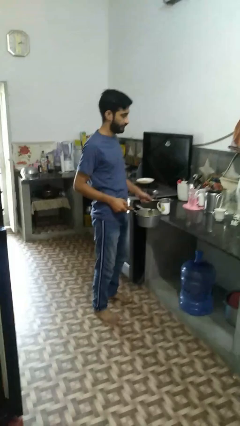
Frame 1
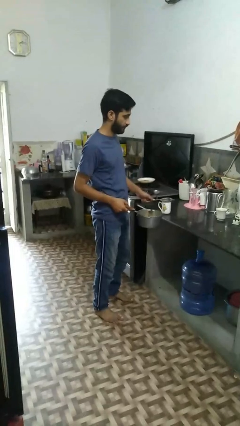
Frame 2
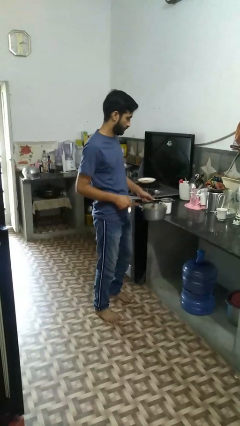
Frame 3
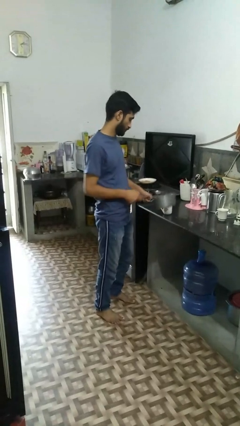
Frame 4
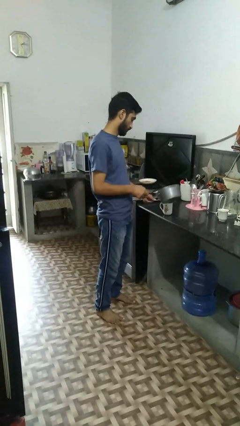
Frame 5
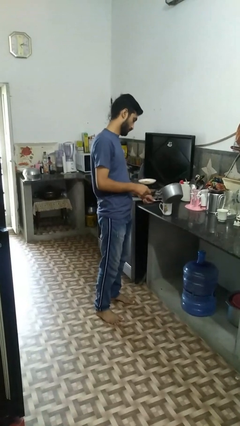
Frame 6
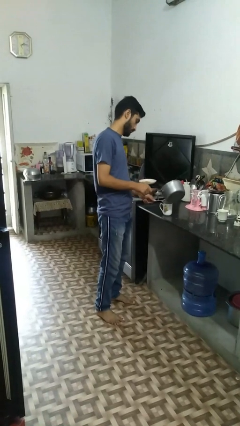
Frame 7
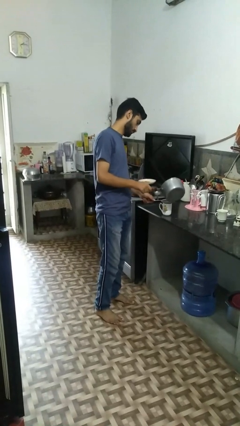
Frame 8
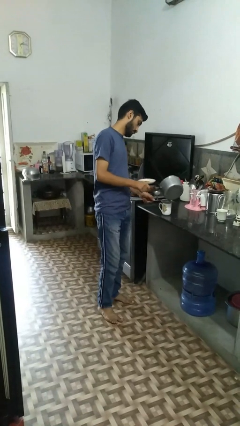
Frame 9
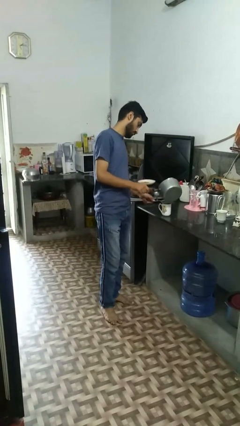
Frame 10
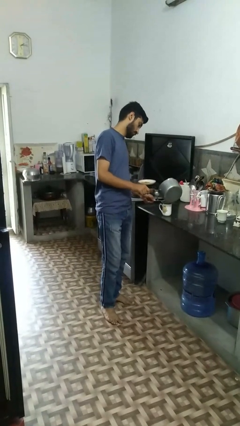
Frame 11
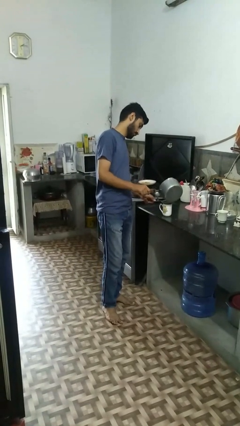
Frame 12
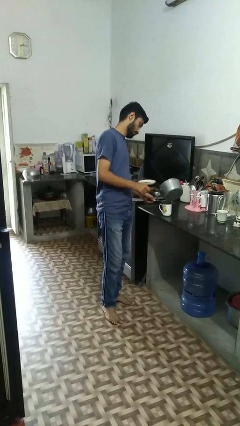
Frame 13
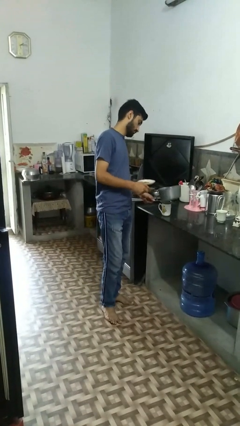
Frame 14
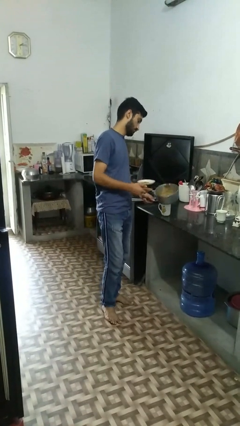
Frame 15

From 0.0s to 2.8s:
person pours coffee into mug

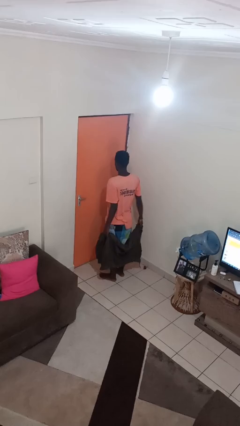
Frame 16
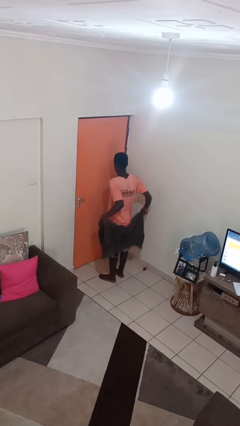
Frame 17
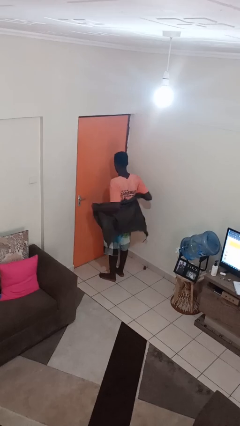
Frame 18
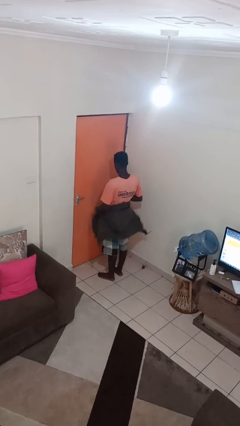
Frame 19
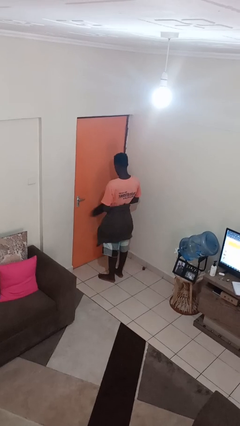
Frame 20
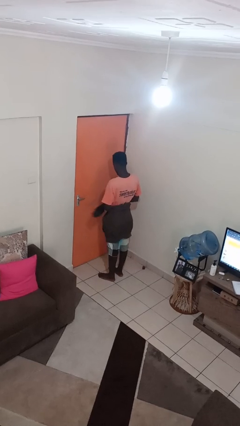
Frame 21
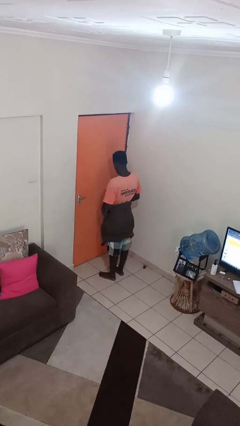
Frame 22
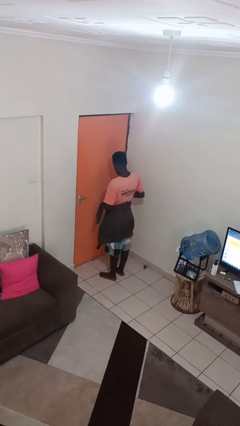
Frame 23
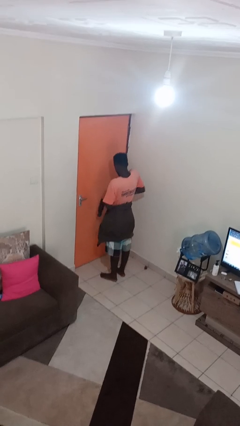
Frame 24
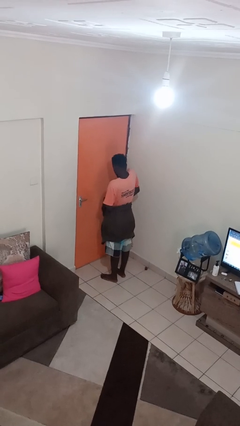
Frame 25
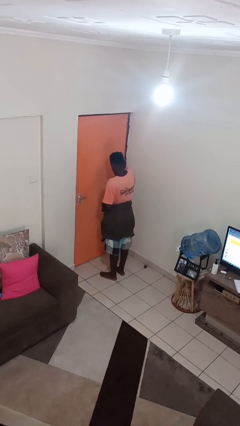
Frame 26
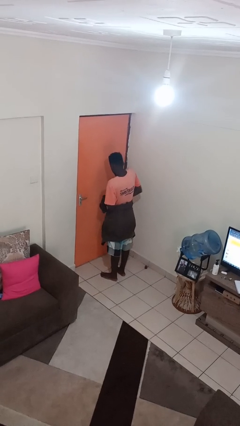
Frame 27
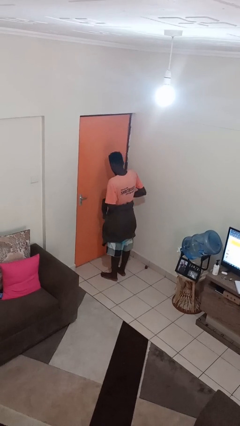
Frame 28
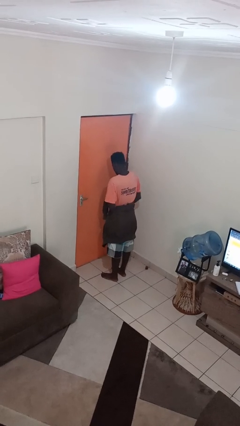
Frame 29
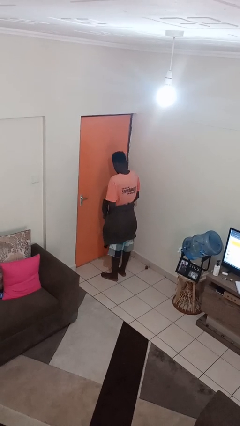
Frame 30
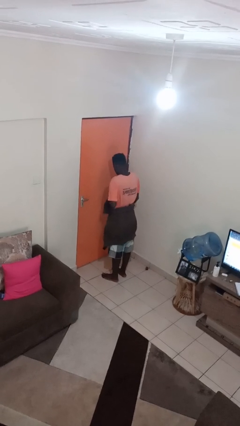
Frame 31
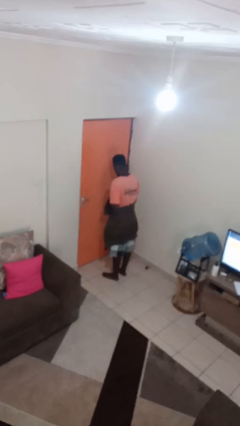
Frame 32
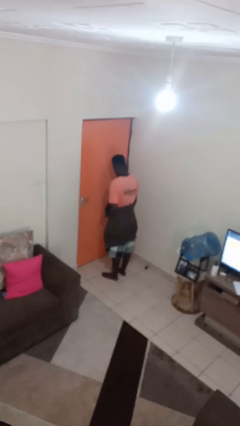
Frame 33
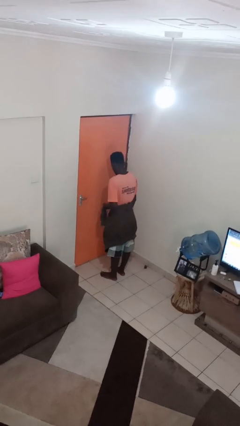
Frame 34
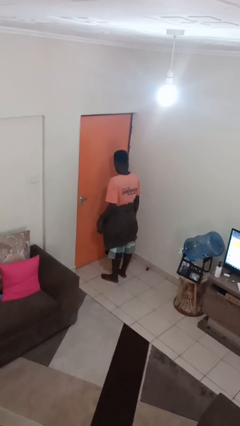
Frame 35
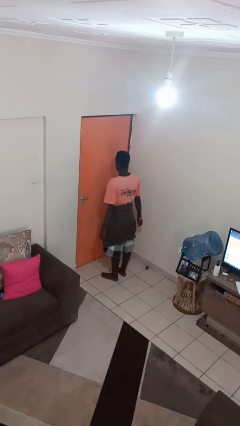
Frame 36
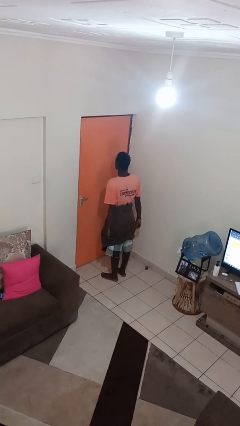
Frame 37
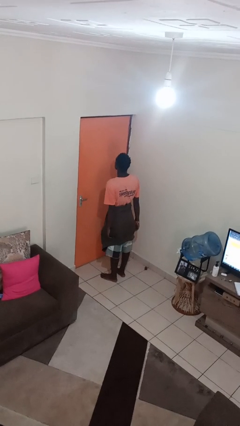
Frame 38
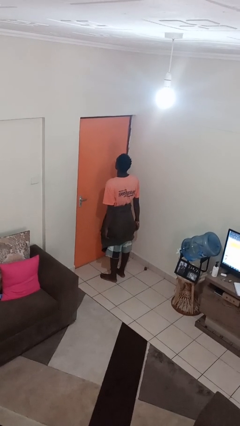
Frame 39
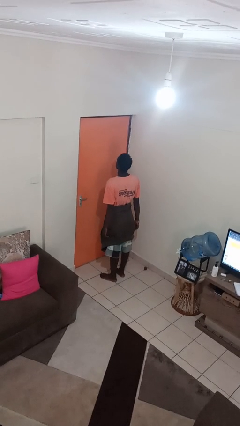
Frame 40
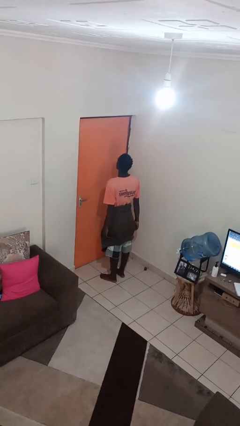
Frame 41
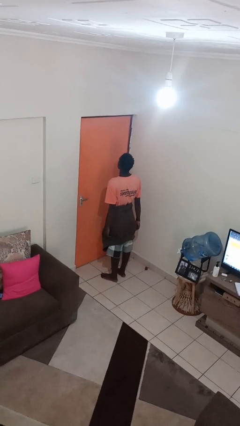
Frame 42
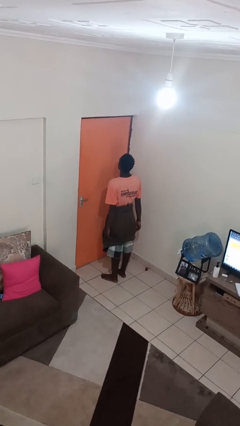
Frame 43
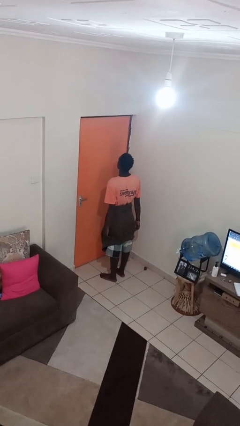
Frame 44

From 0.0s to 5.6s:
person ties jacket around waist

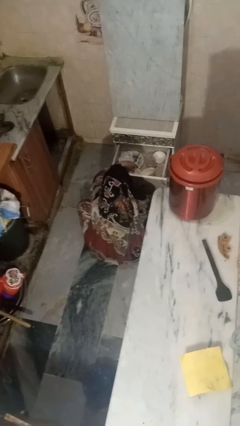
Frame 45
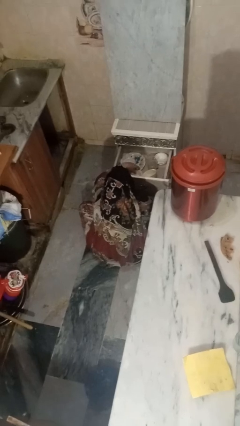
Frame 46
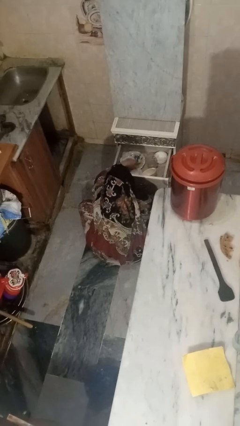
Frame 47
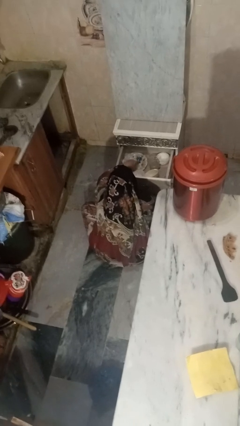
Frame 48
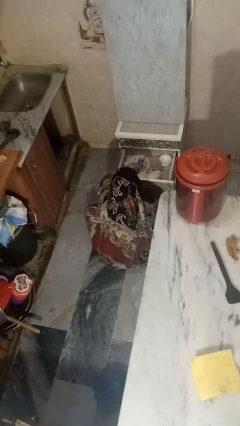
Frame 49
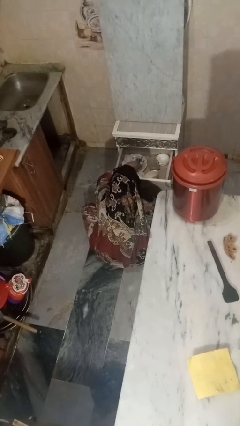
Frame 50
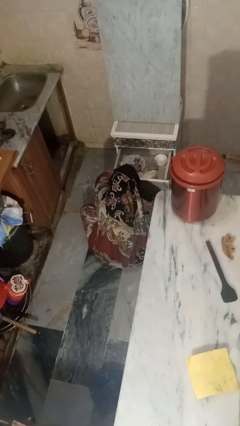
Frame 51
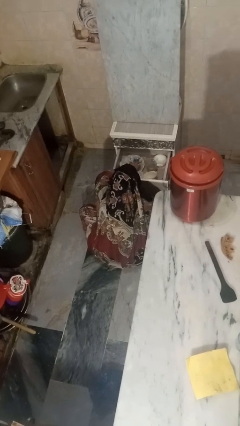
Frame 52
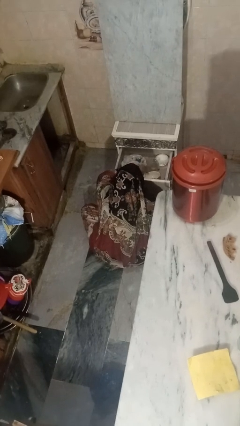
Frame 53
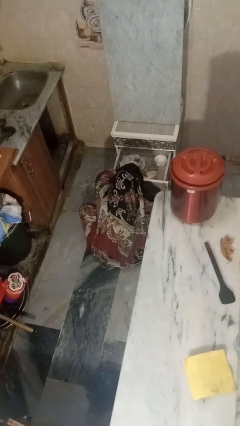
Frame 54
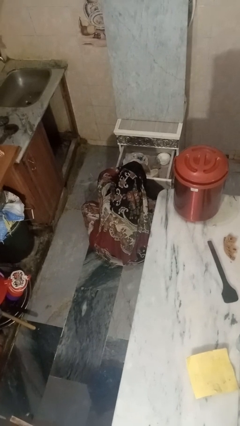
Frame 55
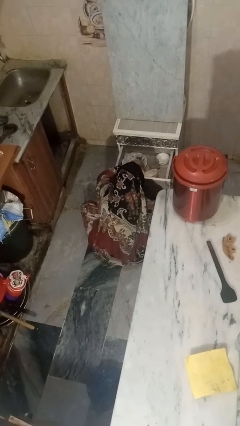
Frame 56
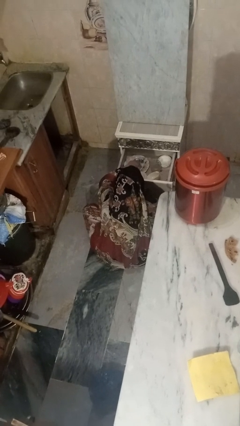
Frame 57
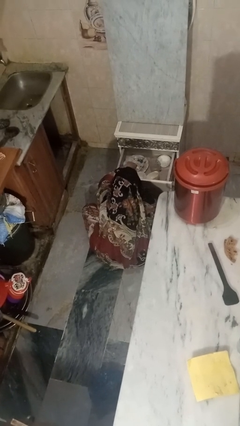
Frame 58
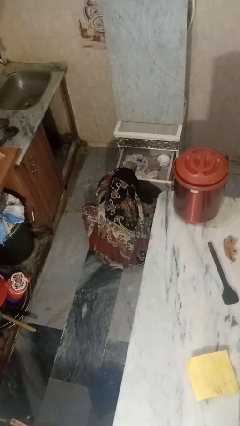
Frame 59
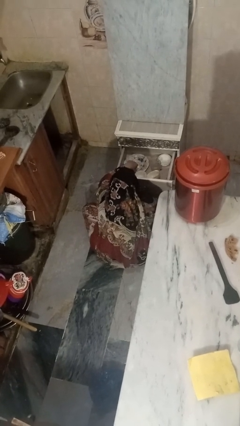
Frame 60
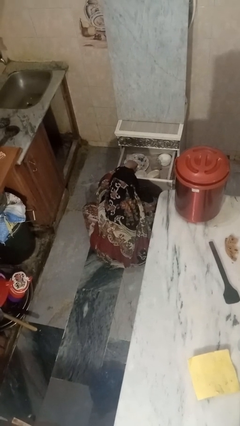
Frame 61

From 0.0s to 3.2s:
person searches in kitchen drawer

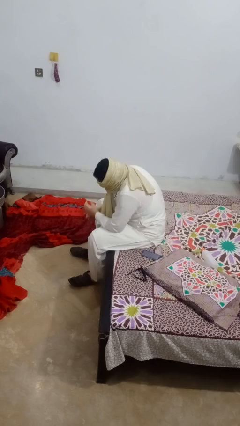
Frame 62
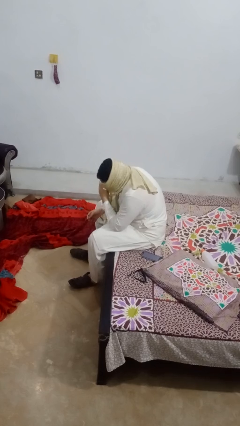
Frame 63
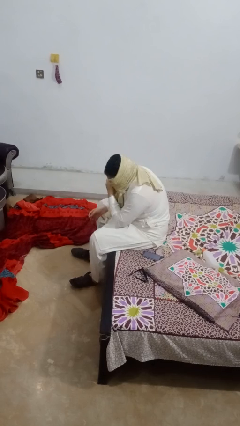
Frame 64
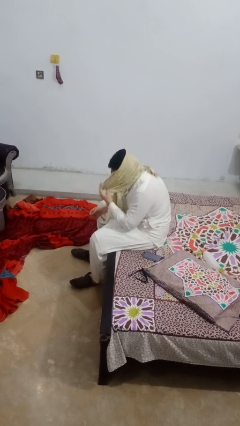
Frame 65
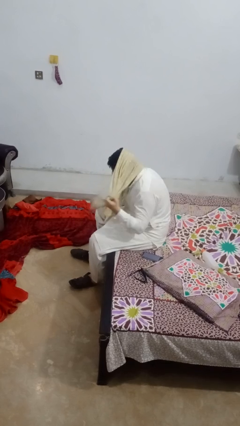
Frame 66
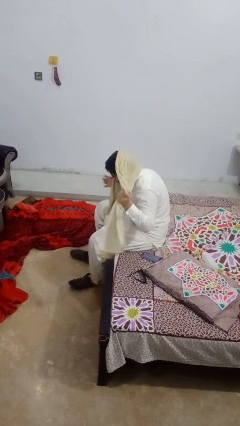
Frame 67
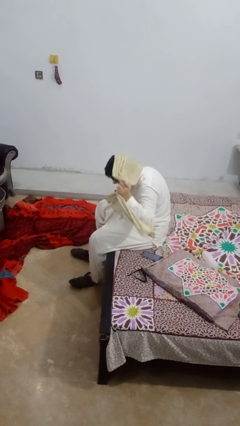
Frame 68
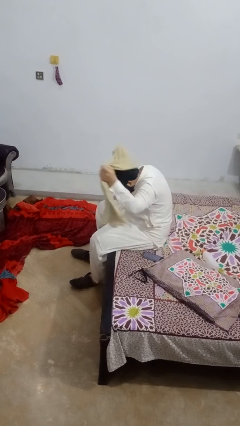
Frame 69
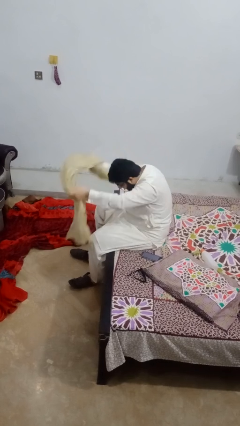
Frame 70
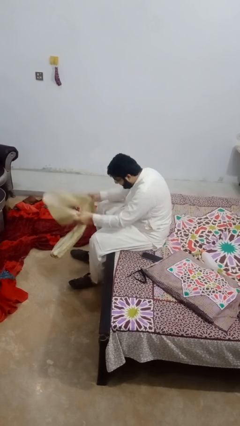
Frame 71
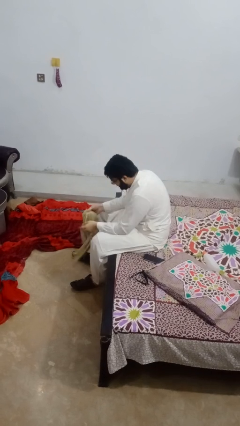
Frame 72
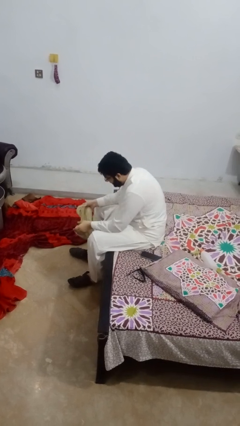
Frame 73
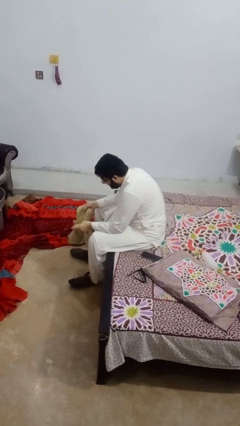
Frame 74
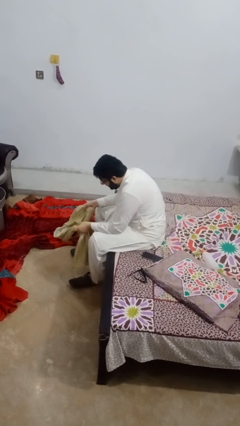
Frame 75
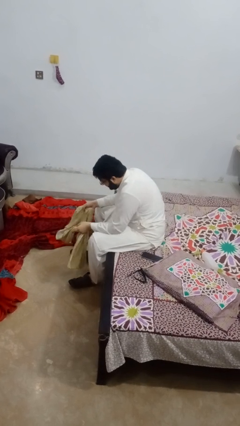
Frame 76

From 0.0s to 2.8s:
person takes off scarf

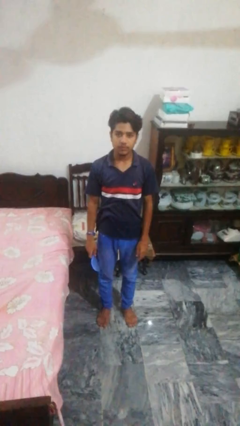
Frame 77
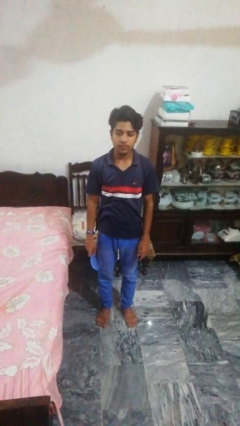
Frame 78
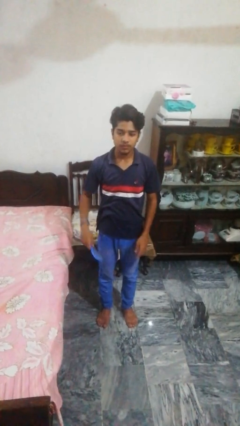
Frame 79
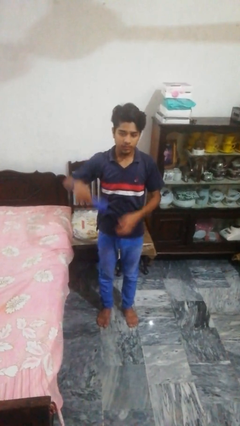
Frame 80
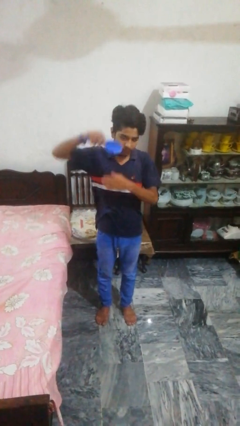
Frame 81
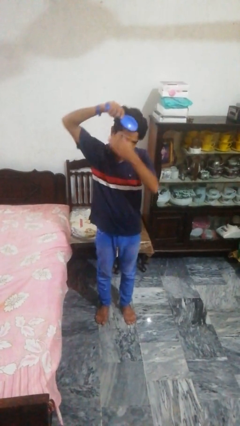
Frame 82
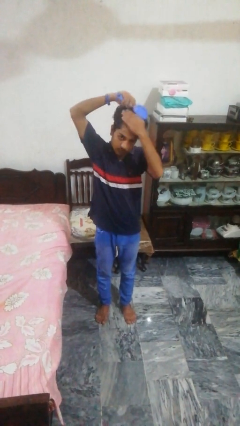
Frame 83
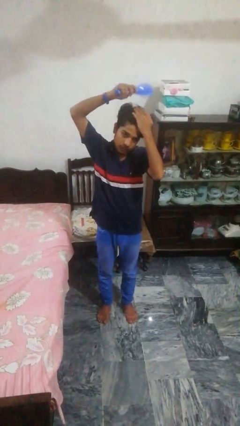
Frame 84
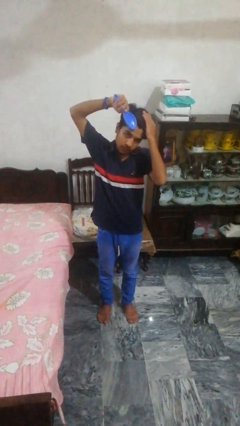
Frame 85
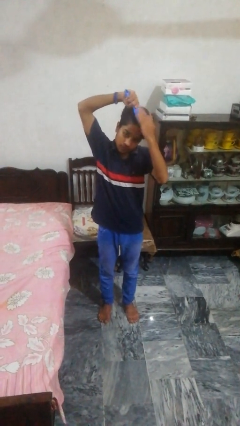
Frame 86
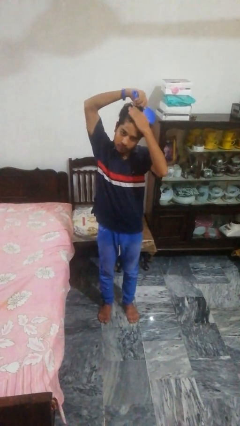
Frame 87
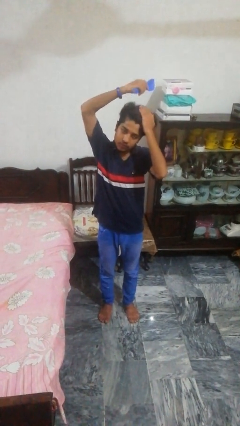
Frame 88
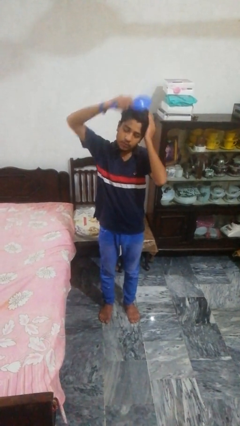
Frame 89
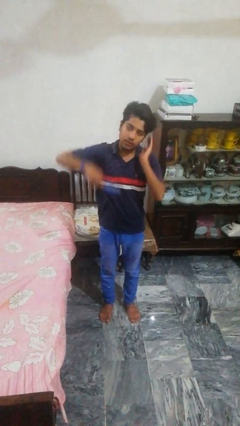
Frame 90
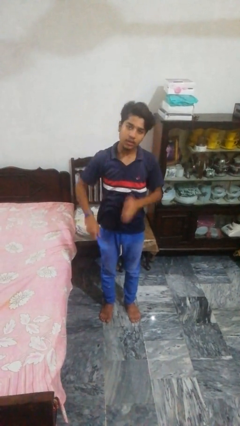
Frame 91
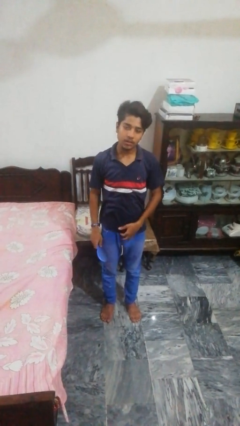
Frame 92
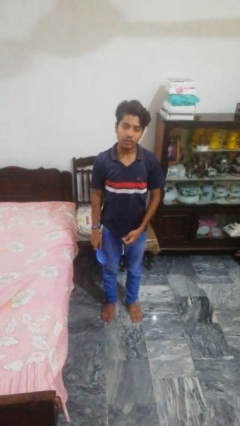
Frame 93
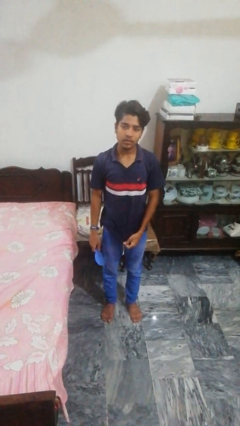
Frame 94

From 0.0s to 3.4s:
person brushes hair

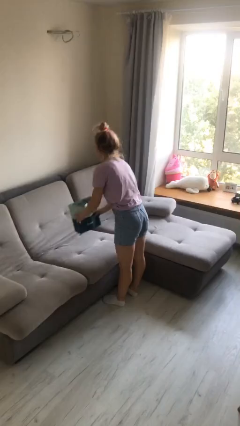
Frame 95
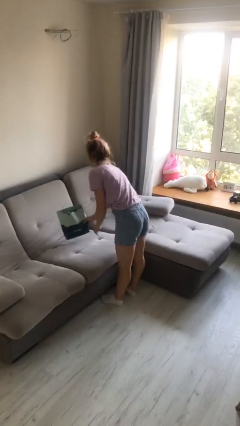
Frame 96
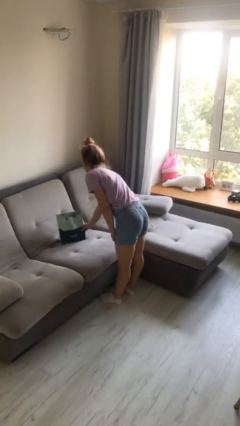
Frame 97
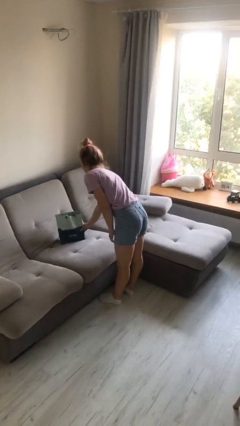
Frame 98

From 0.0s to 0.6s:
person puts down object on couch
